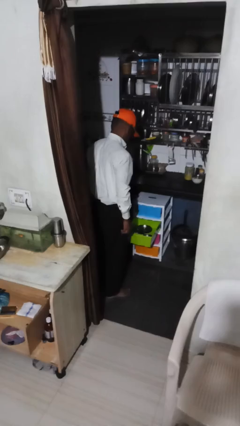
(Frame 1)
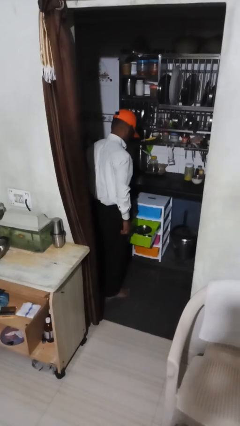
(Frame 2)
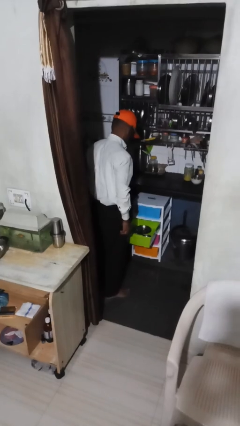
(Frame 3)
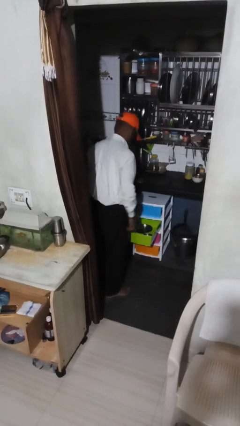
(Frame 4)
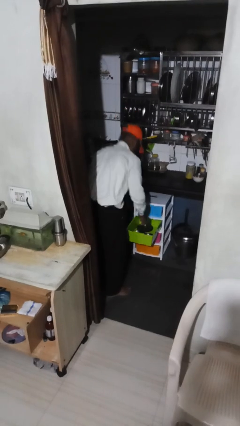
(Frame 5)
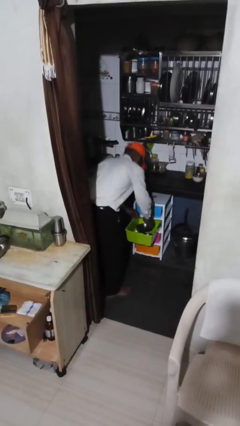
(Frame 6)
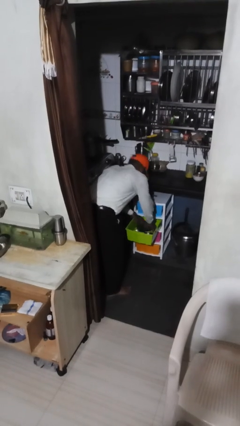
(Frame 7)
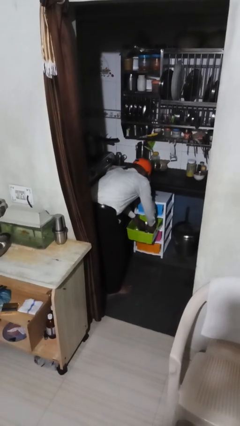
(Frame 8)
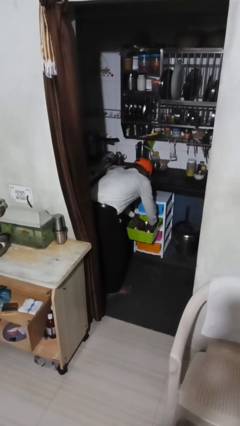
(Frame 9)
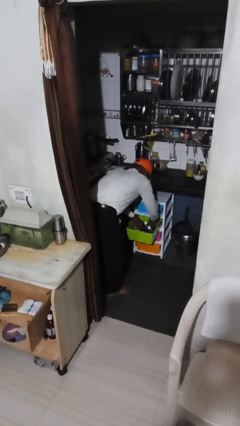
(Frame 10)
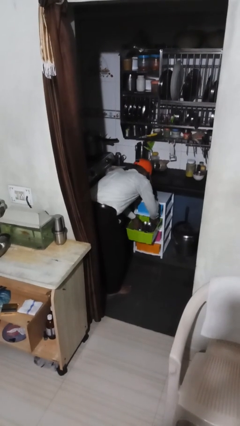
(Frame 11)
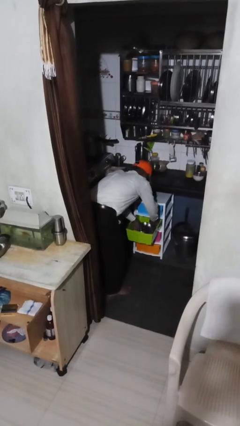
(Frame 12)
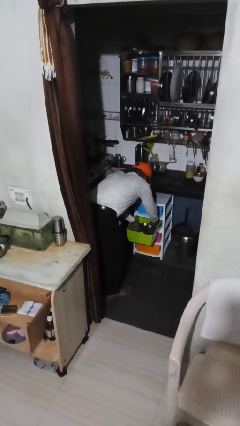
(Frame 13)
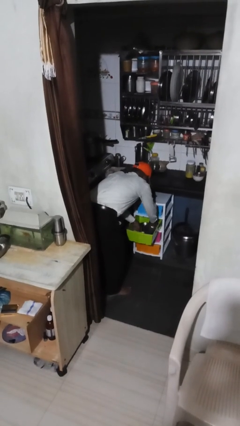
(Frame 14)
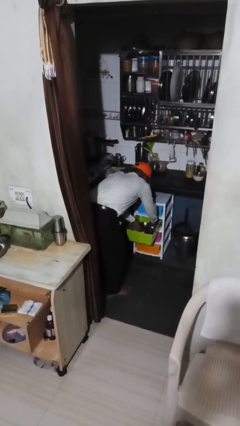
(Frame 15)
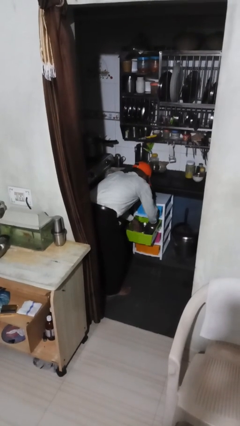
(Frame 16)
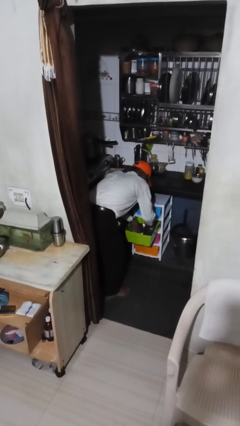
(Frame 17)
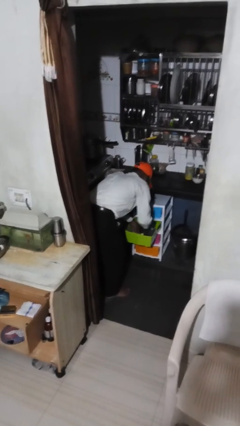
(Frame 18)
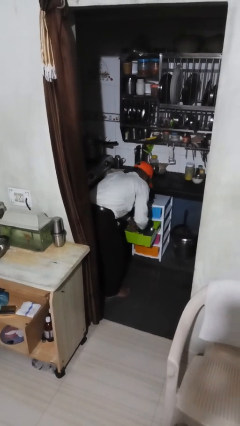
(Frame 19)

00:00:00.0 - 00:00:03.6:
person searches in kitchen drawer

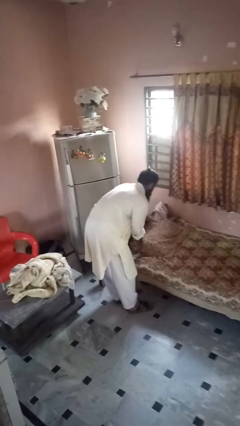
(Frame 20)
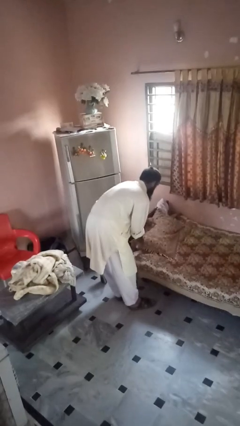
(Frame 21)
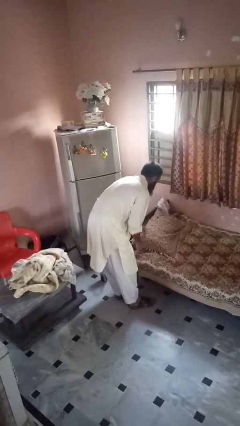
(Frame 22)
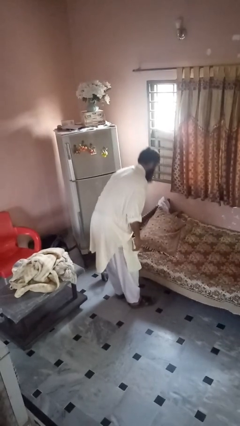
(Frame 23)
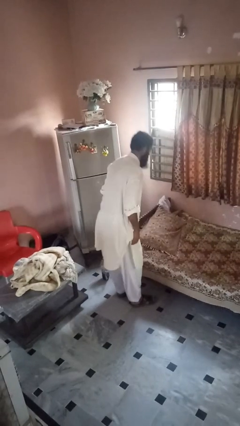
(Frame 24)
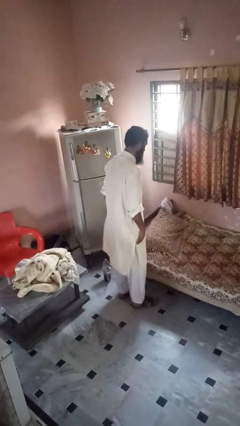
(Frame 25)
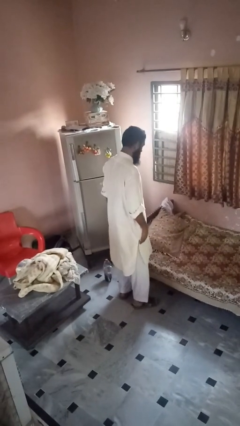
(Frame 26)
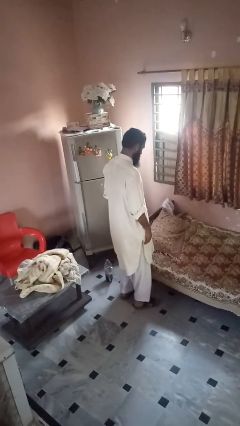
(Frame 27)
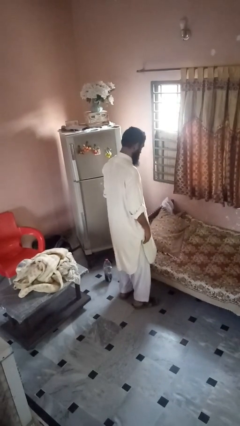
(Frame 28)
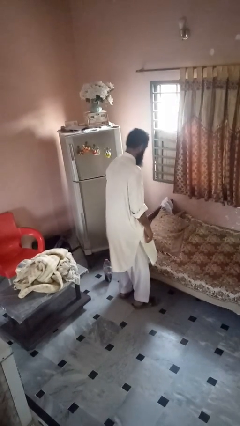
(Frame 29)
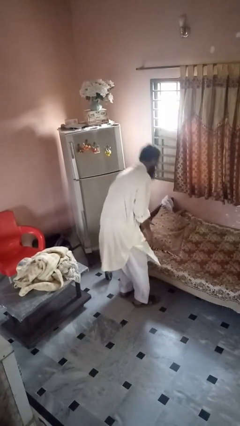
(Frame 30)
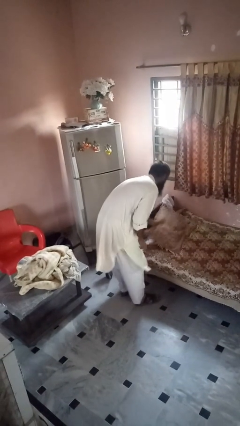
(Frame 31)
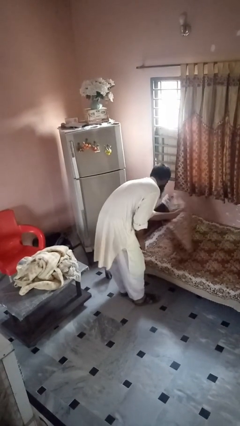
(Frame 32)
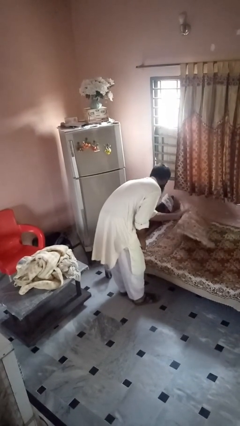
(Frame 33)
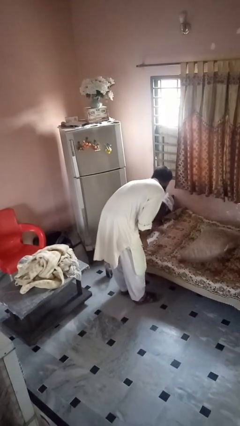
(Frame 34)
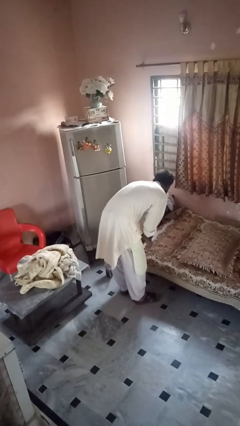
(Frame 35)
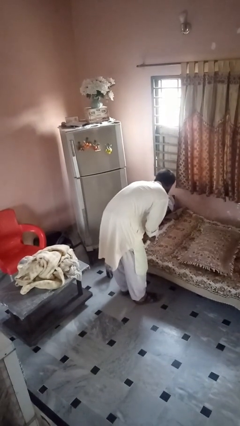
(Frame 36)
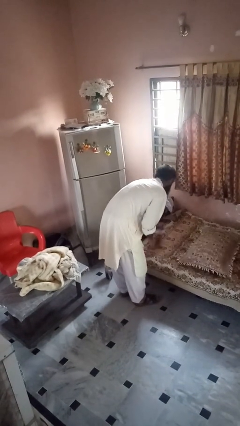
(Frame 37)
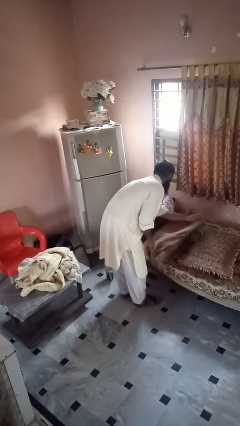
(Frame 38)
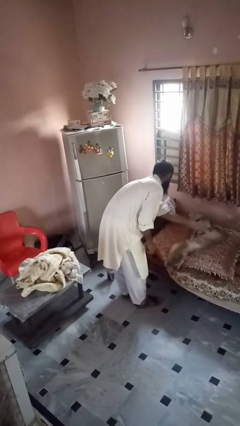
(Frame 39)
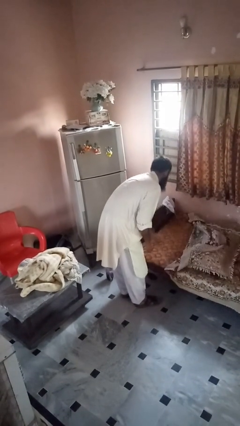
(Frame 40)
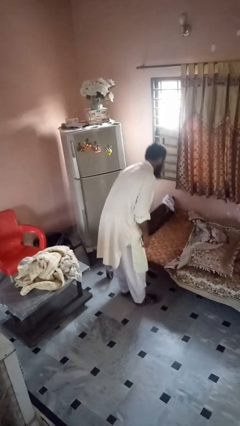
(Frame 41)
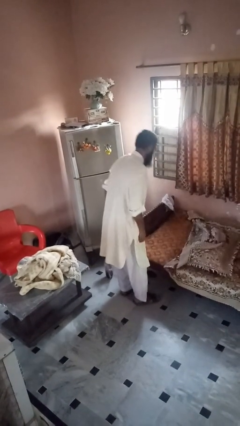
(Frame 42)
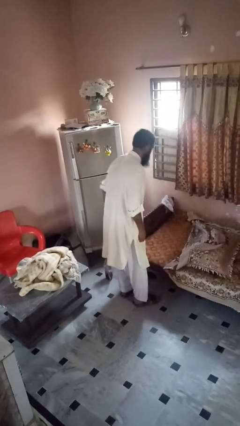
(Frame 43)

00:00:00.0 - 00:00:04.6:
person uncovers with bedsheets

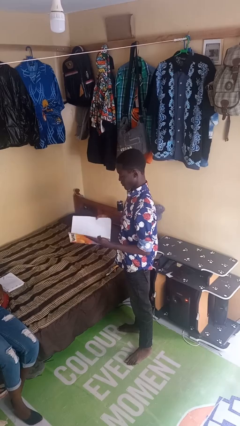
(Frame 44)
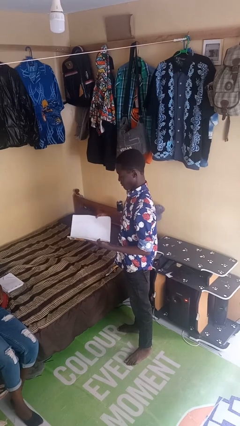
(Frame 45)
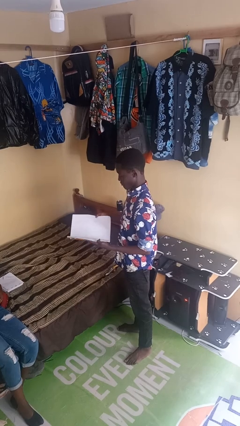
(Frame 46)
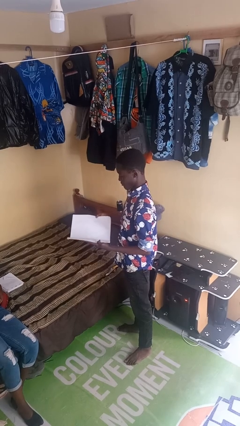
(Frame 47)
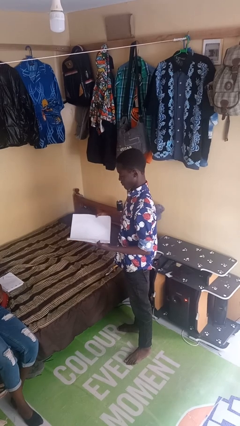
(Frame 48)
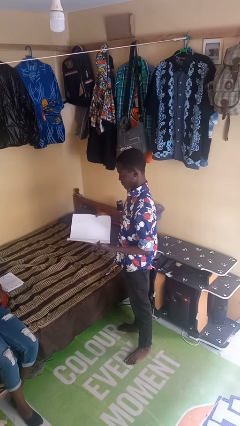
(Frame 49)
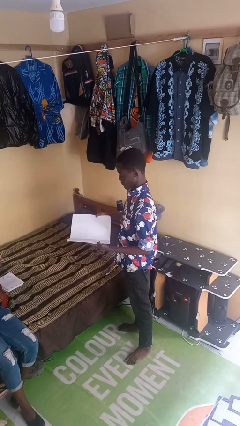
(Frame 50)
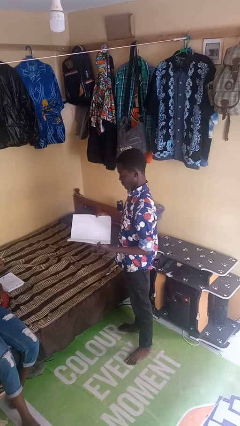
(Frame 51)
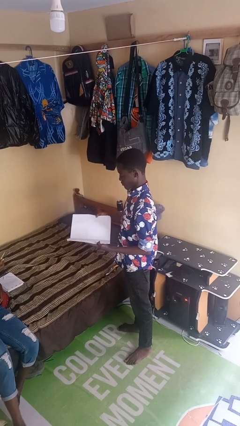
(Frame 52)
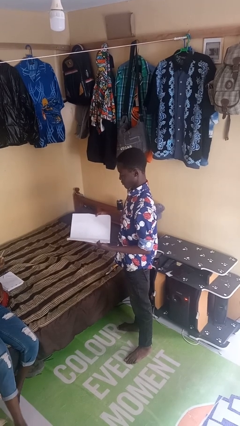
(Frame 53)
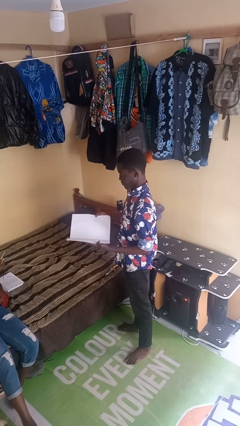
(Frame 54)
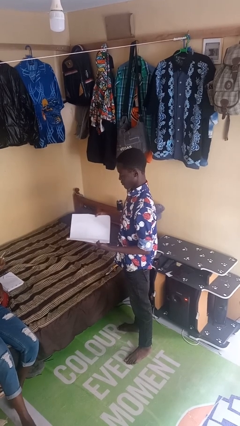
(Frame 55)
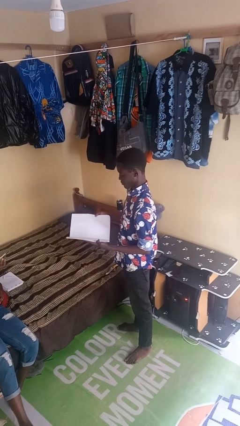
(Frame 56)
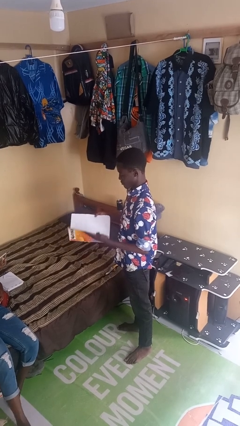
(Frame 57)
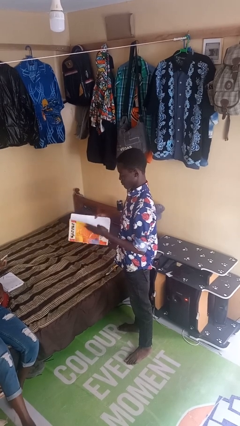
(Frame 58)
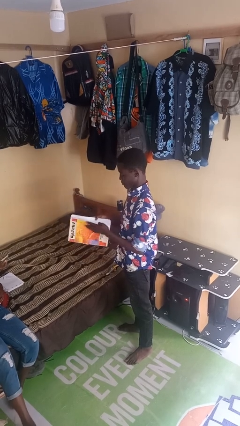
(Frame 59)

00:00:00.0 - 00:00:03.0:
person reads newspaper

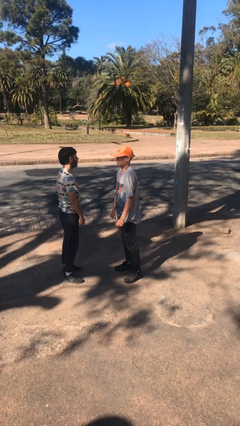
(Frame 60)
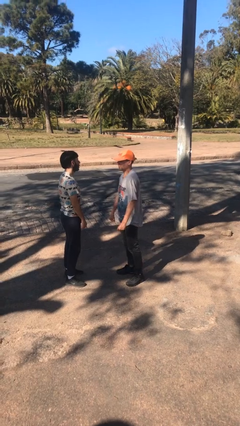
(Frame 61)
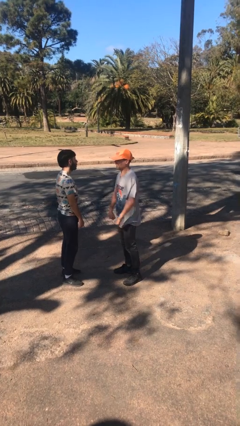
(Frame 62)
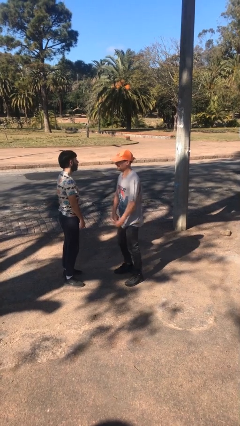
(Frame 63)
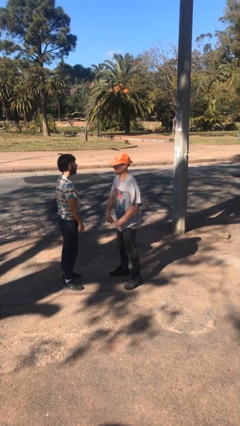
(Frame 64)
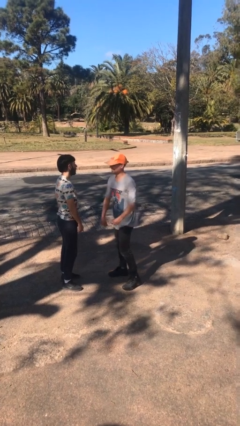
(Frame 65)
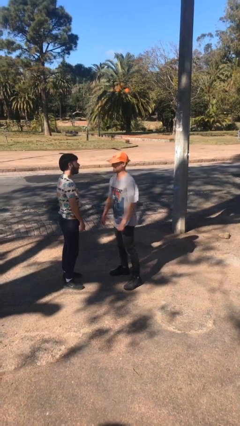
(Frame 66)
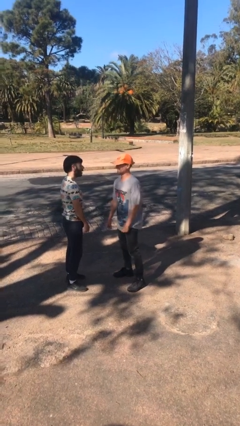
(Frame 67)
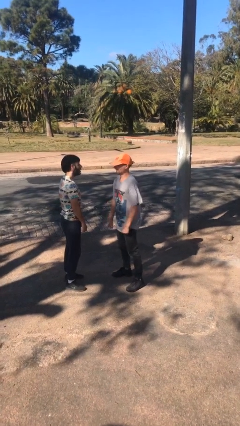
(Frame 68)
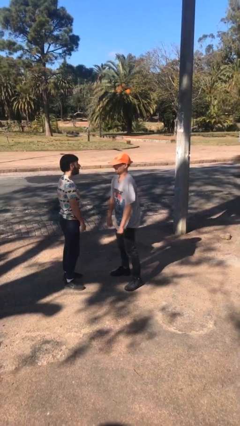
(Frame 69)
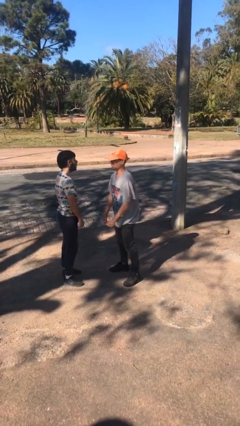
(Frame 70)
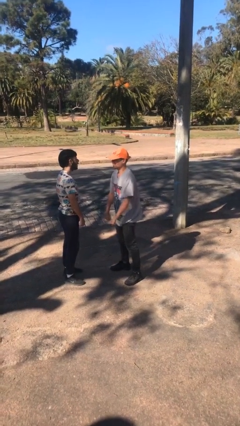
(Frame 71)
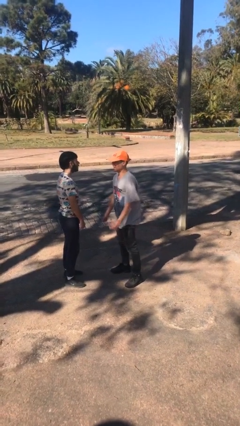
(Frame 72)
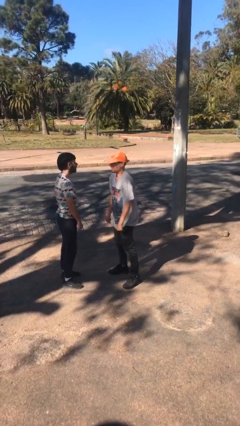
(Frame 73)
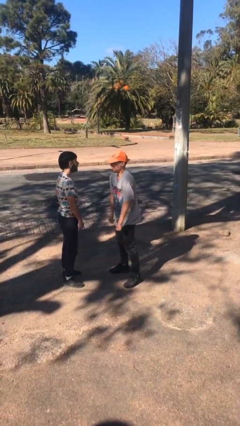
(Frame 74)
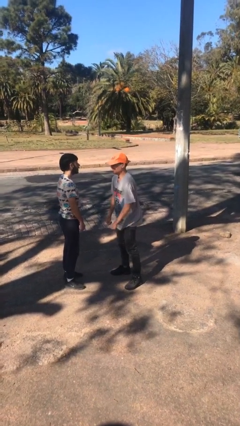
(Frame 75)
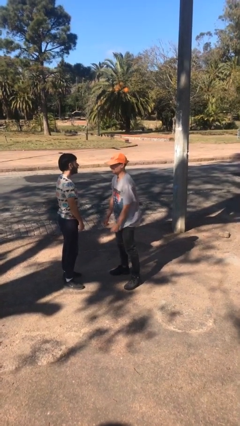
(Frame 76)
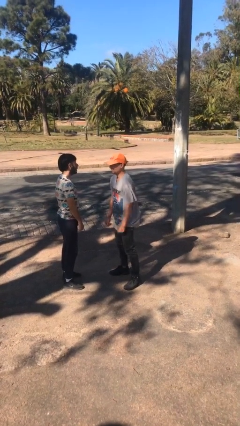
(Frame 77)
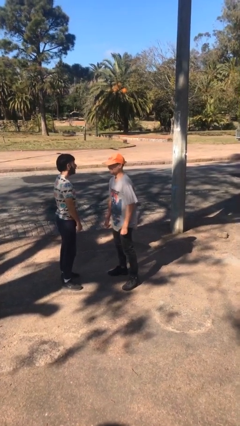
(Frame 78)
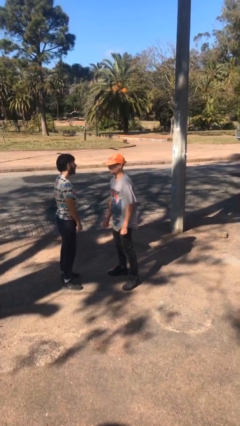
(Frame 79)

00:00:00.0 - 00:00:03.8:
person carries person over shoulder

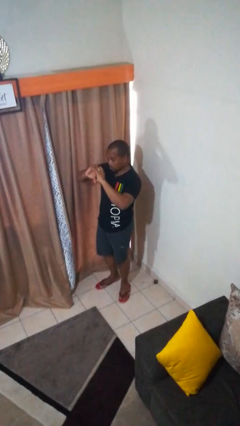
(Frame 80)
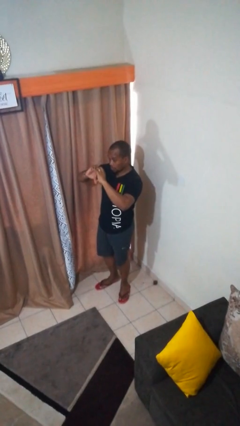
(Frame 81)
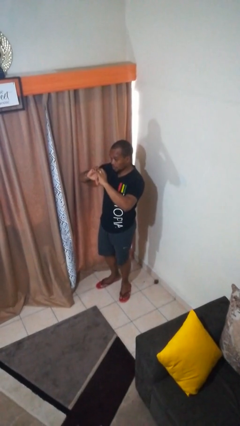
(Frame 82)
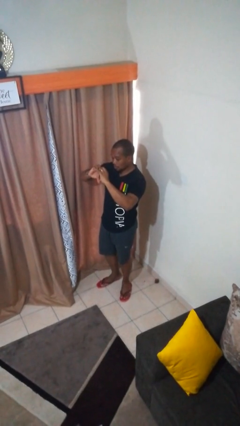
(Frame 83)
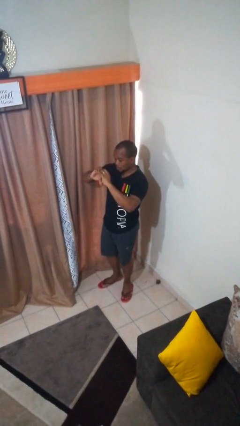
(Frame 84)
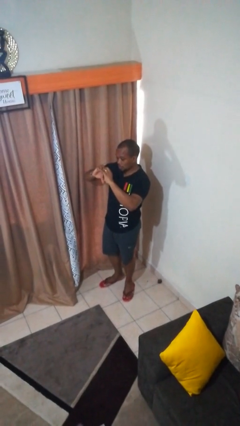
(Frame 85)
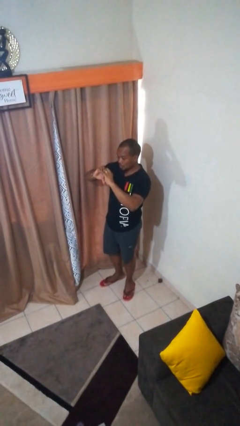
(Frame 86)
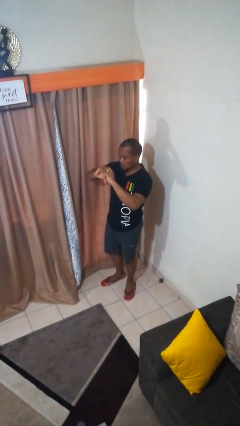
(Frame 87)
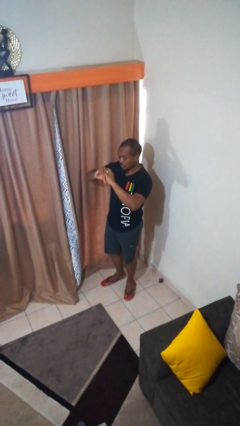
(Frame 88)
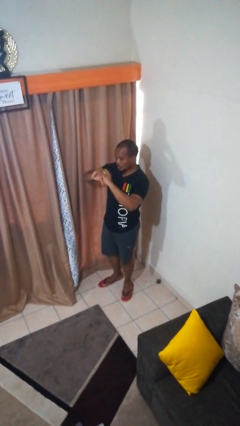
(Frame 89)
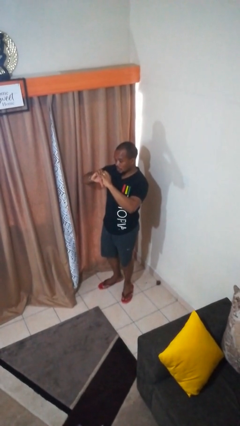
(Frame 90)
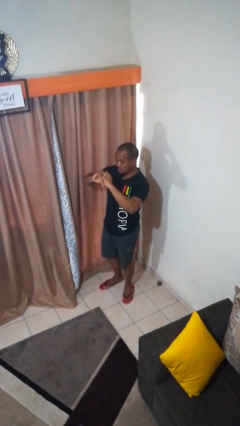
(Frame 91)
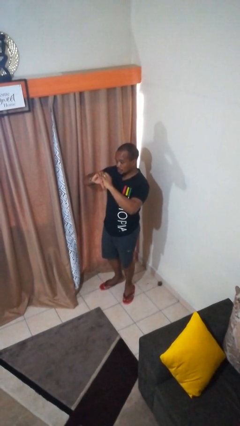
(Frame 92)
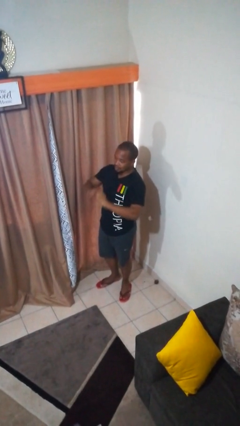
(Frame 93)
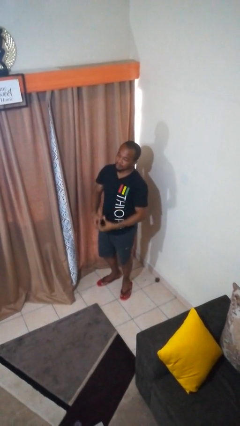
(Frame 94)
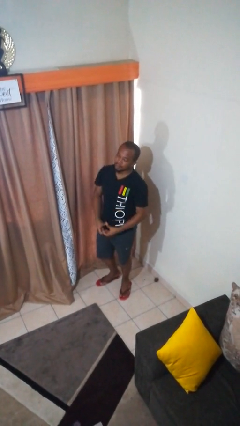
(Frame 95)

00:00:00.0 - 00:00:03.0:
person gestures heart
